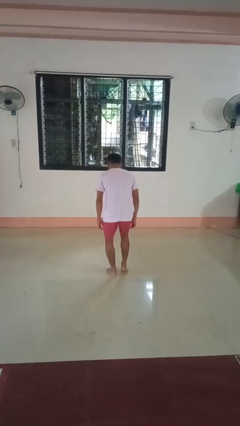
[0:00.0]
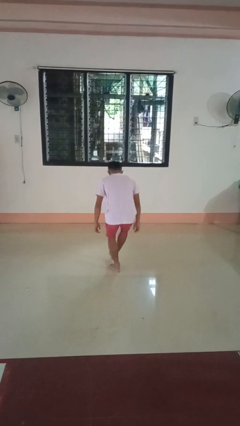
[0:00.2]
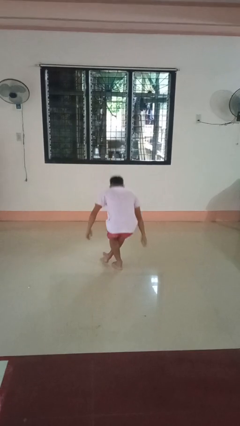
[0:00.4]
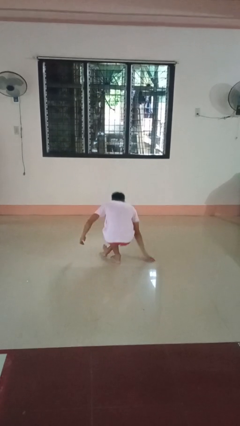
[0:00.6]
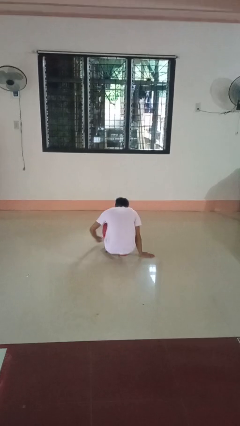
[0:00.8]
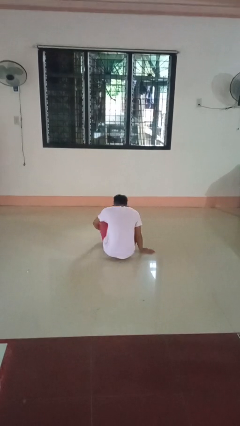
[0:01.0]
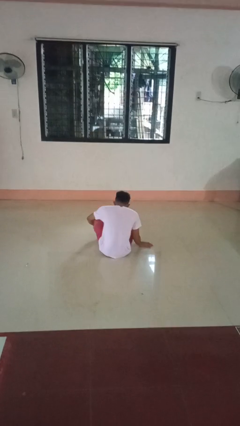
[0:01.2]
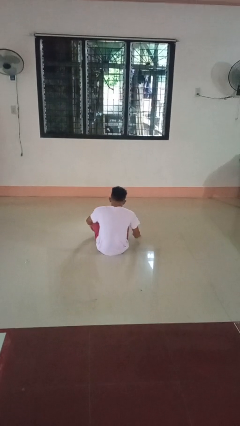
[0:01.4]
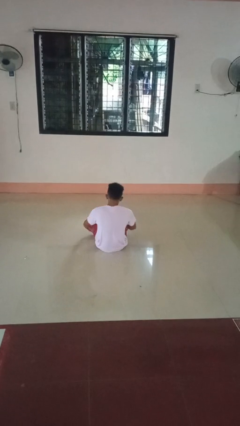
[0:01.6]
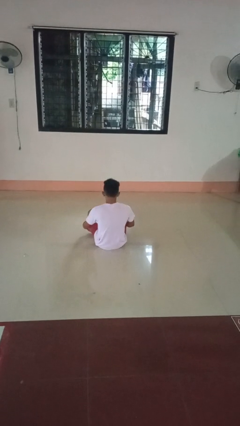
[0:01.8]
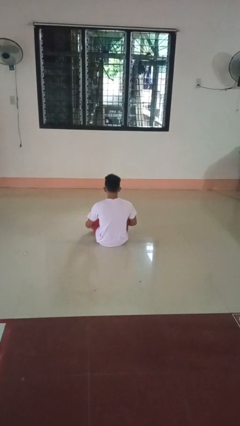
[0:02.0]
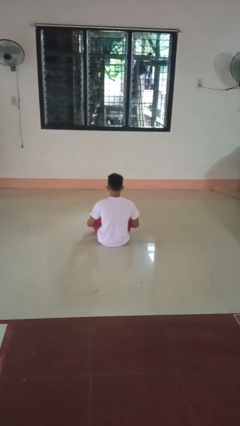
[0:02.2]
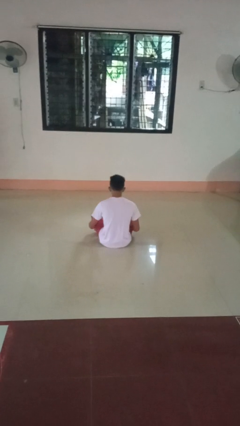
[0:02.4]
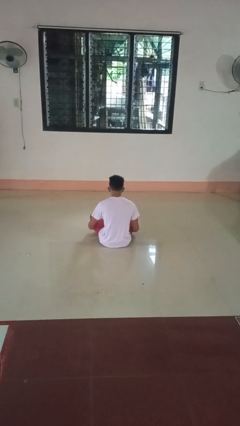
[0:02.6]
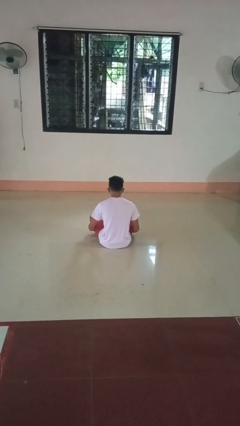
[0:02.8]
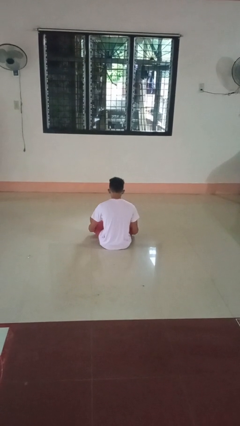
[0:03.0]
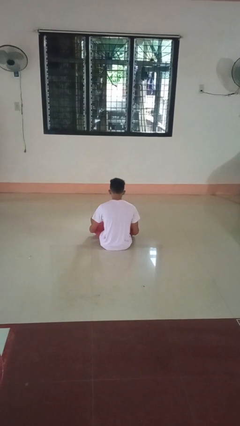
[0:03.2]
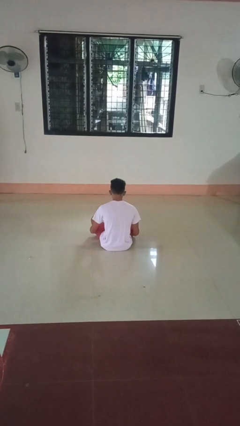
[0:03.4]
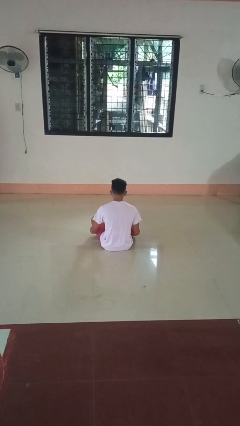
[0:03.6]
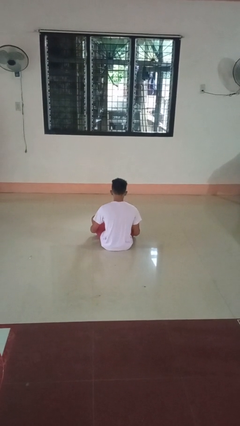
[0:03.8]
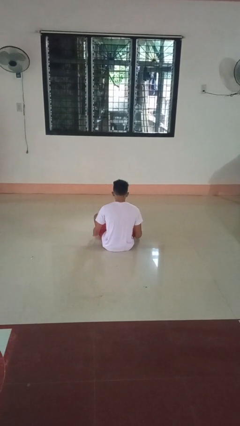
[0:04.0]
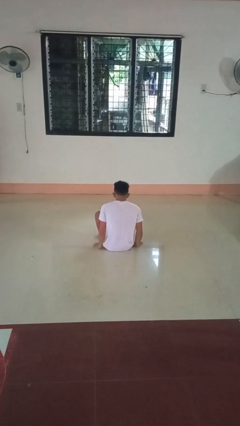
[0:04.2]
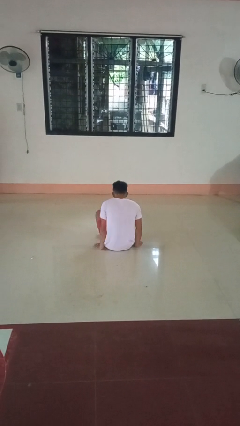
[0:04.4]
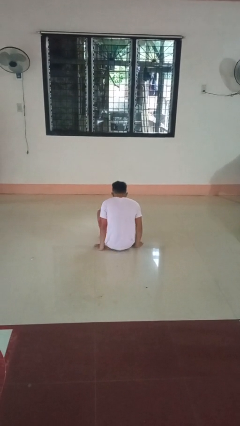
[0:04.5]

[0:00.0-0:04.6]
person sits crisscross

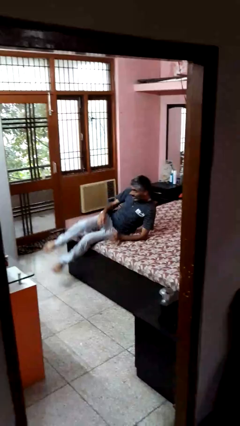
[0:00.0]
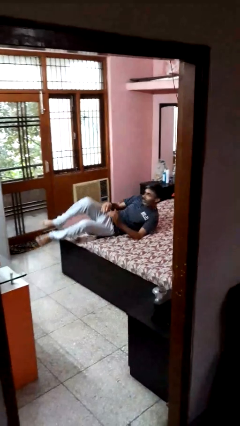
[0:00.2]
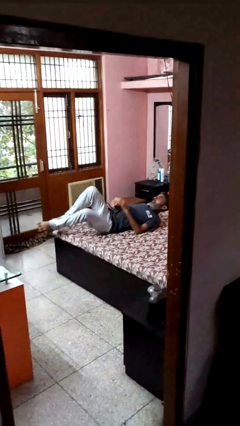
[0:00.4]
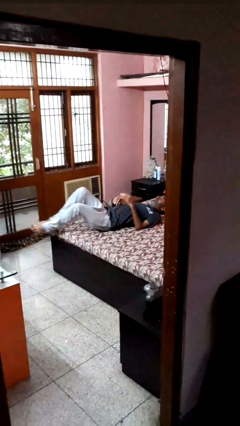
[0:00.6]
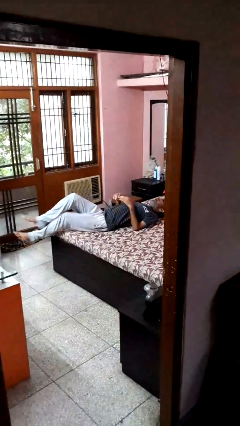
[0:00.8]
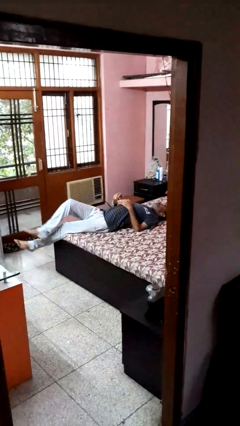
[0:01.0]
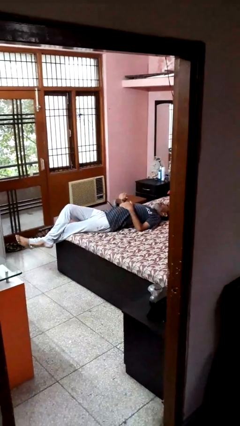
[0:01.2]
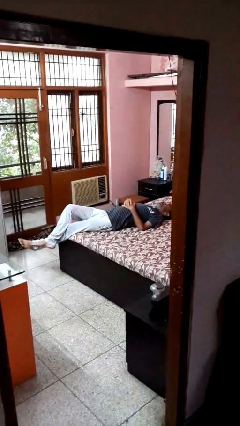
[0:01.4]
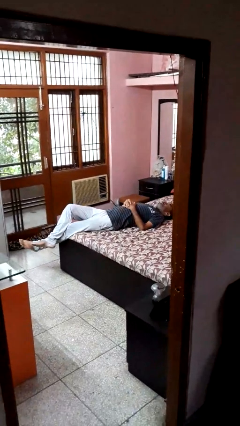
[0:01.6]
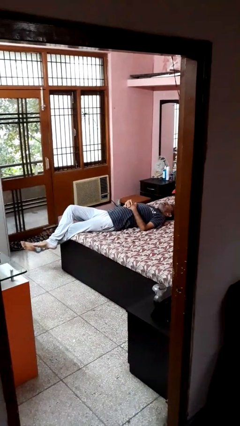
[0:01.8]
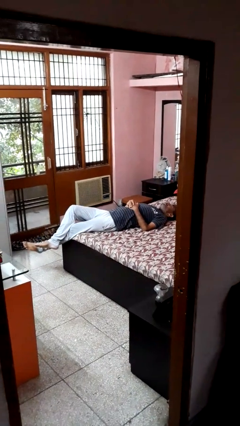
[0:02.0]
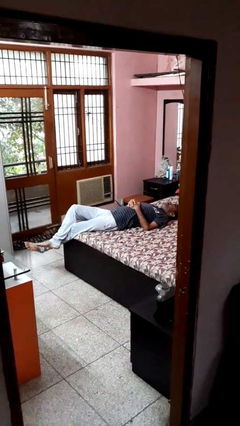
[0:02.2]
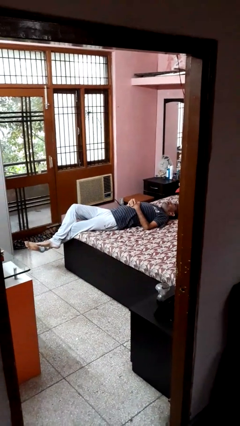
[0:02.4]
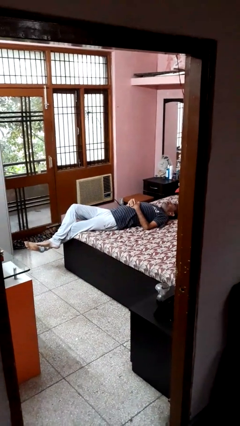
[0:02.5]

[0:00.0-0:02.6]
person lies down on bed

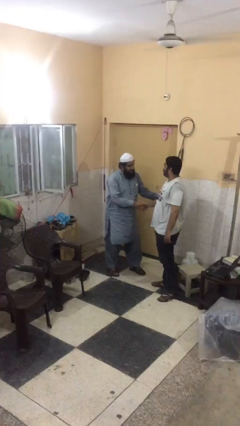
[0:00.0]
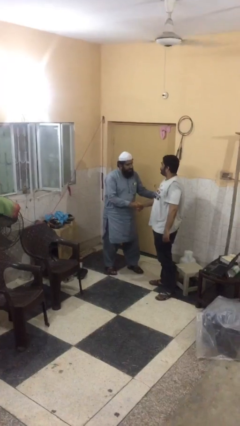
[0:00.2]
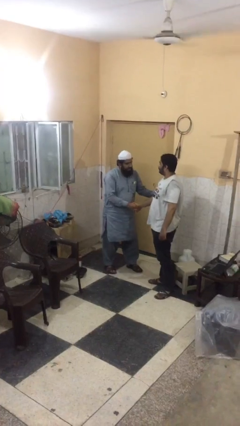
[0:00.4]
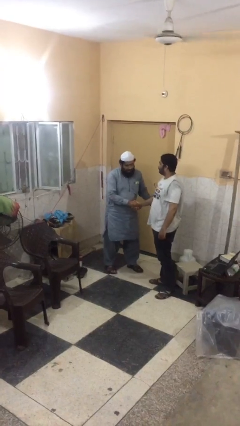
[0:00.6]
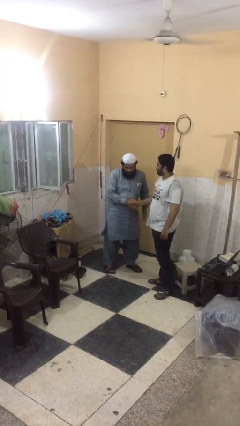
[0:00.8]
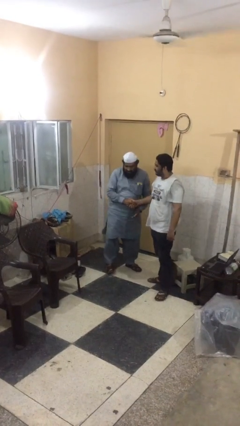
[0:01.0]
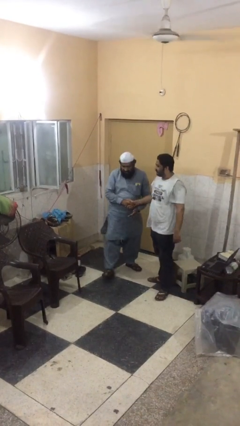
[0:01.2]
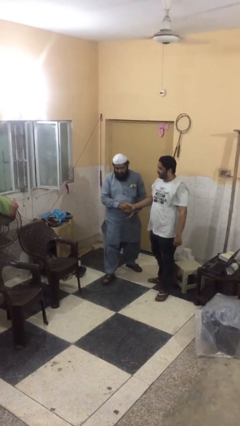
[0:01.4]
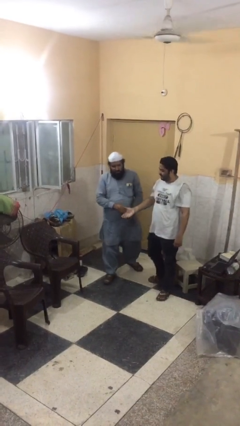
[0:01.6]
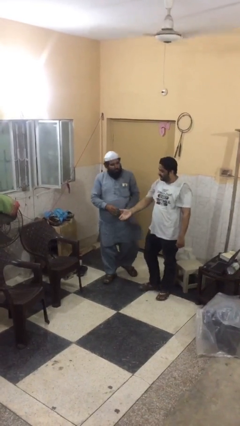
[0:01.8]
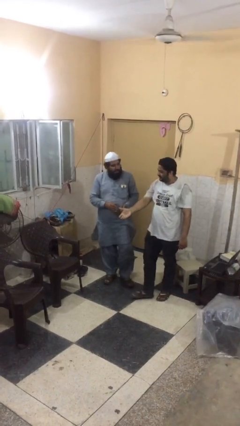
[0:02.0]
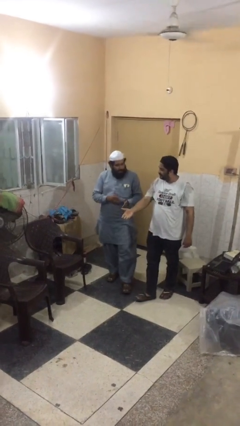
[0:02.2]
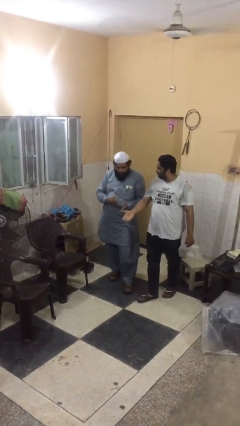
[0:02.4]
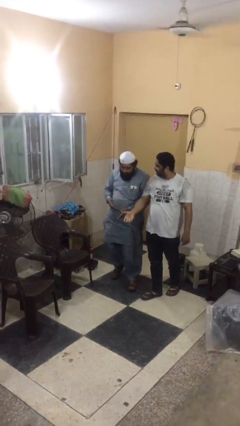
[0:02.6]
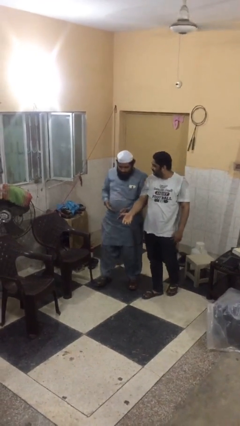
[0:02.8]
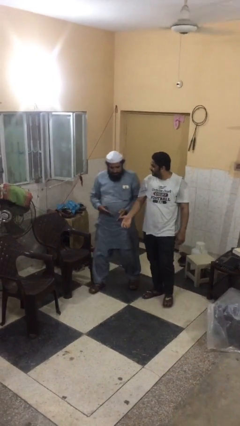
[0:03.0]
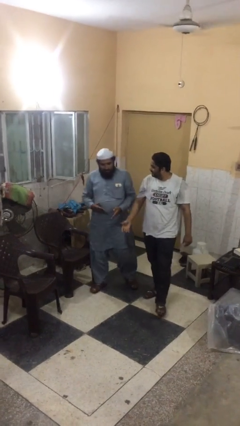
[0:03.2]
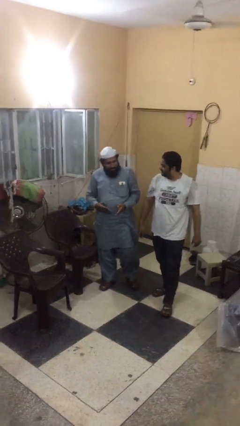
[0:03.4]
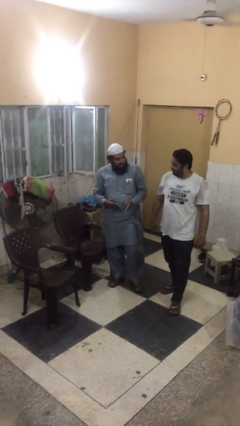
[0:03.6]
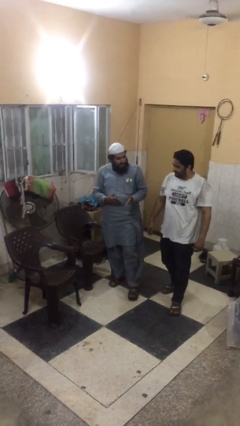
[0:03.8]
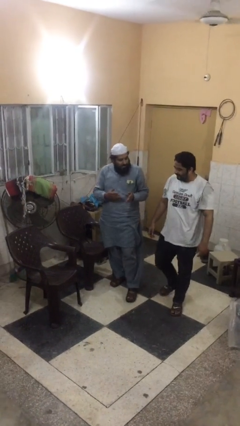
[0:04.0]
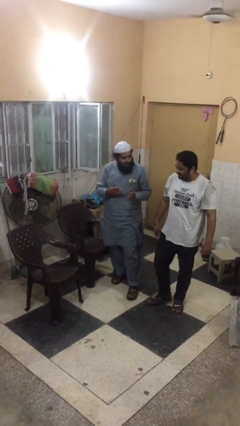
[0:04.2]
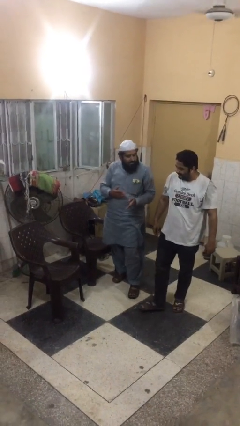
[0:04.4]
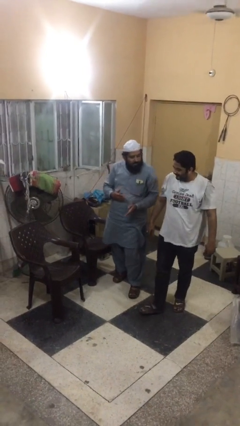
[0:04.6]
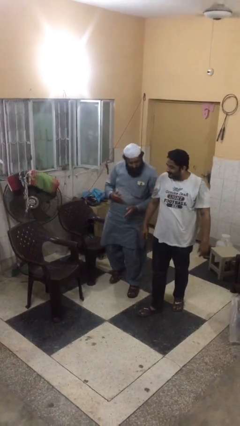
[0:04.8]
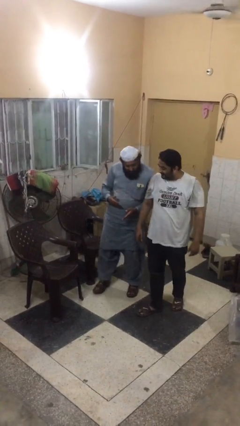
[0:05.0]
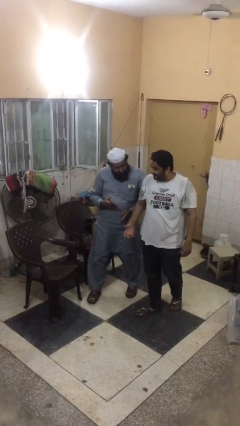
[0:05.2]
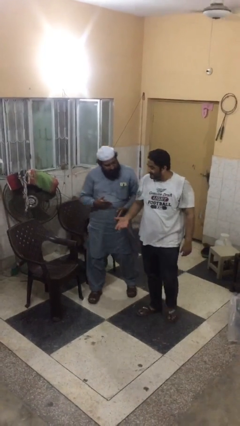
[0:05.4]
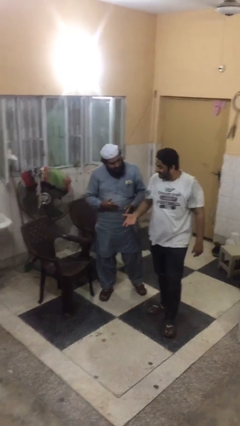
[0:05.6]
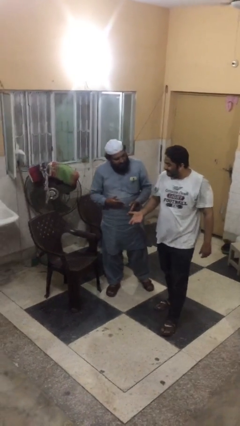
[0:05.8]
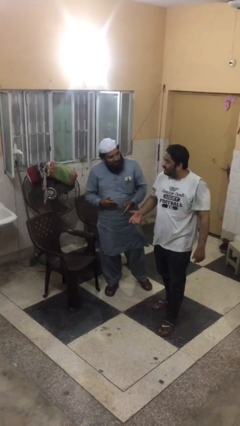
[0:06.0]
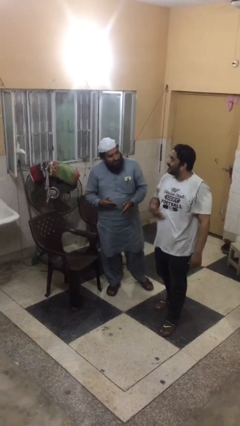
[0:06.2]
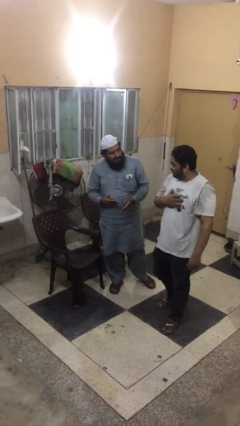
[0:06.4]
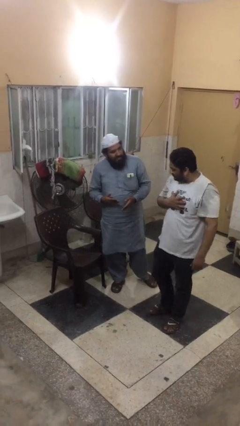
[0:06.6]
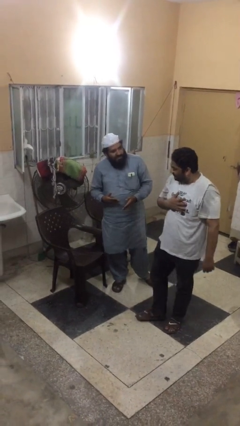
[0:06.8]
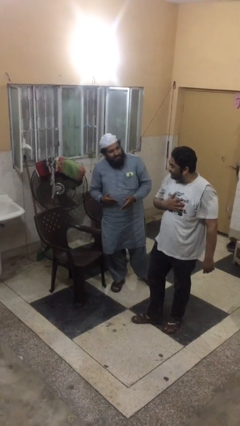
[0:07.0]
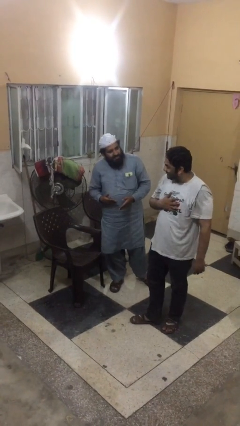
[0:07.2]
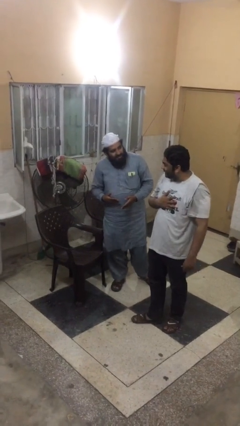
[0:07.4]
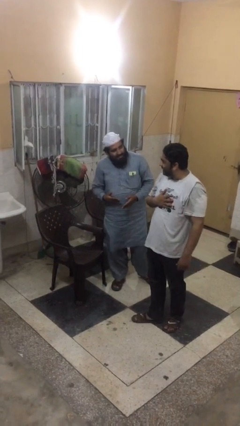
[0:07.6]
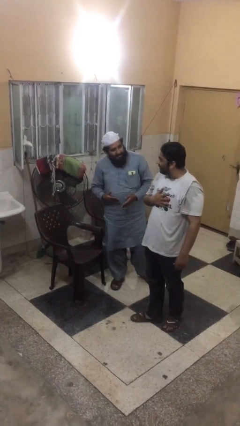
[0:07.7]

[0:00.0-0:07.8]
person talks to person

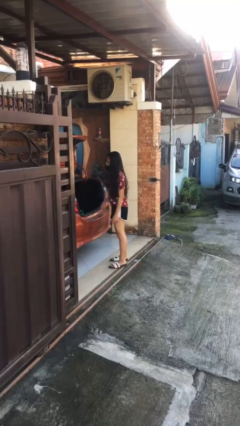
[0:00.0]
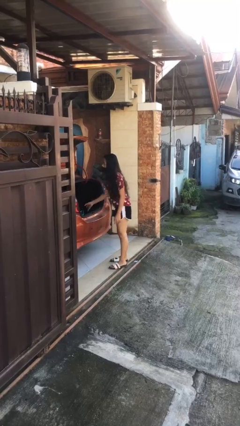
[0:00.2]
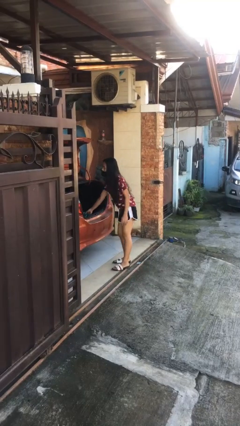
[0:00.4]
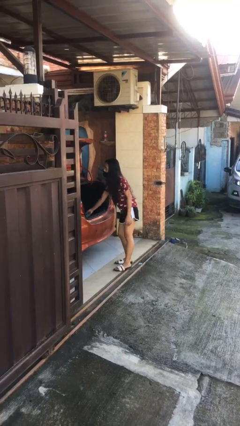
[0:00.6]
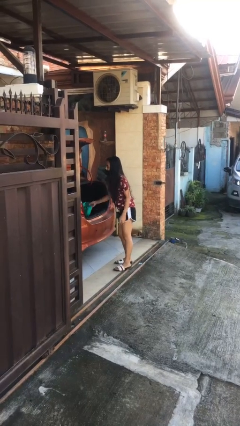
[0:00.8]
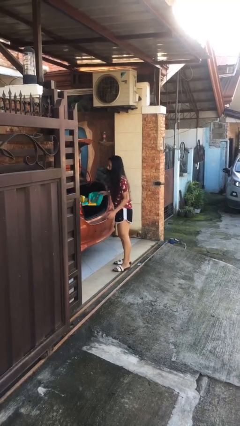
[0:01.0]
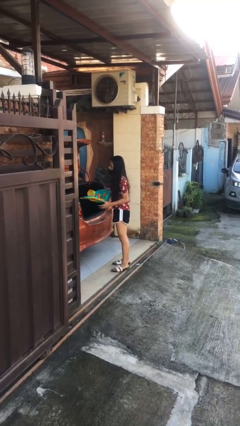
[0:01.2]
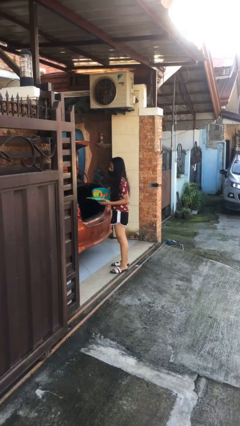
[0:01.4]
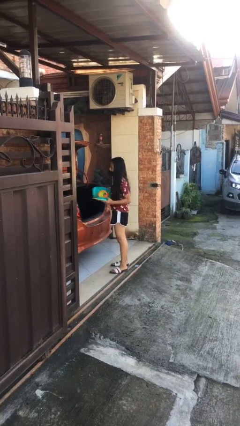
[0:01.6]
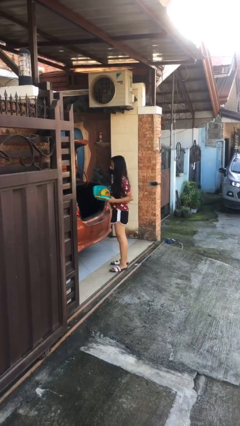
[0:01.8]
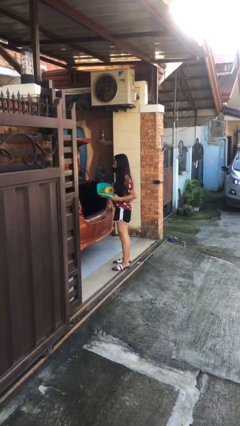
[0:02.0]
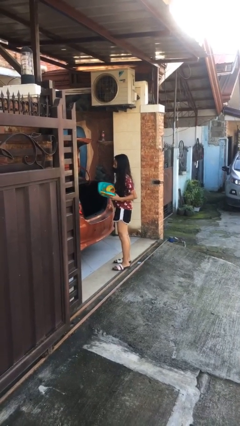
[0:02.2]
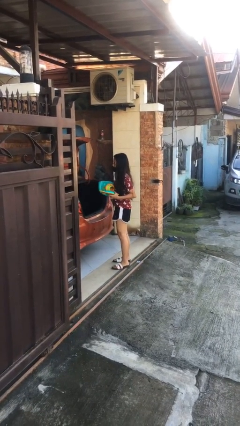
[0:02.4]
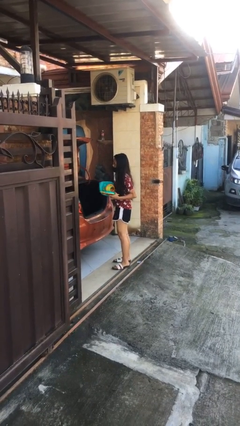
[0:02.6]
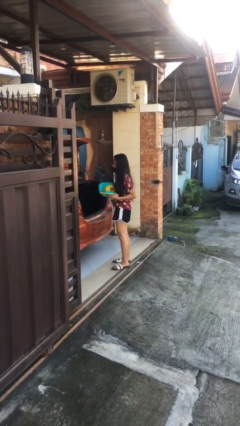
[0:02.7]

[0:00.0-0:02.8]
person unloads car
